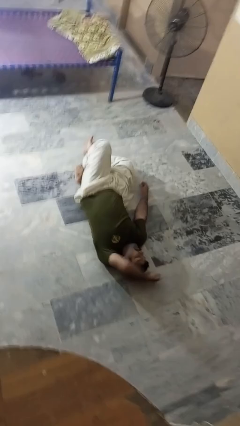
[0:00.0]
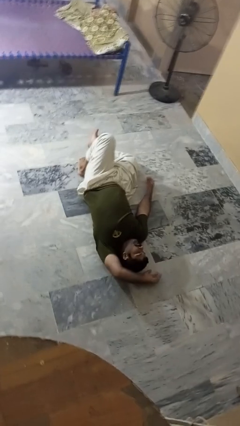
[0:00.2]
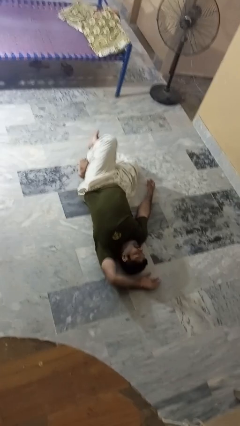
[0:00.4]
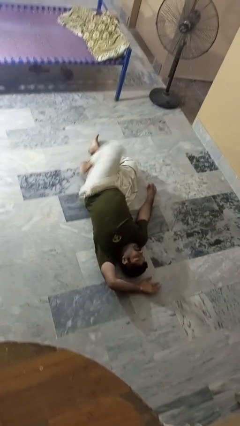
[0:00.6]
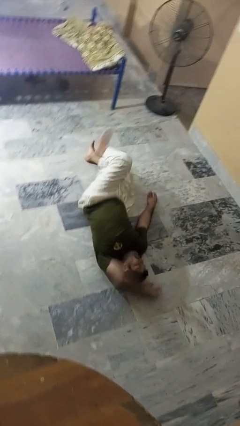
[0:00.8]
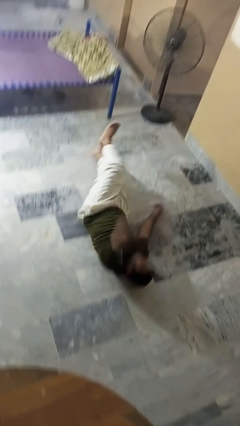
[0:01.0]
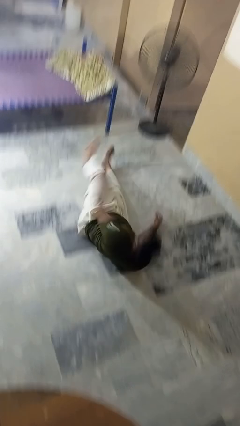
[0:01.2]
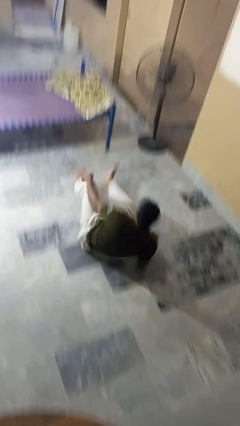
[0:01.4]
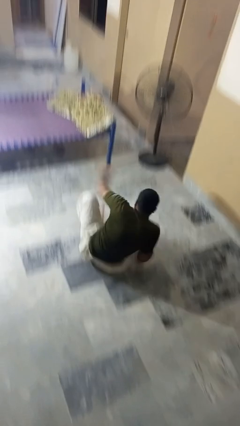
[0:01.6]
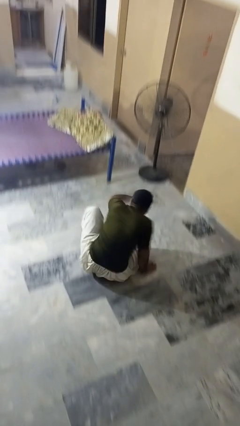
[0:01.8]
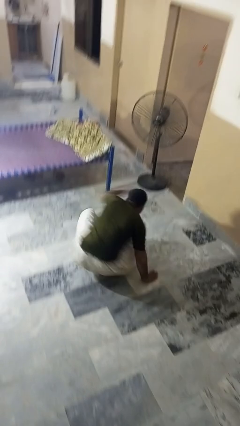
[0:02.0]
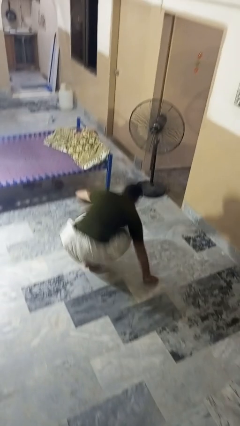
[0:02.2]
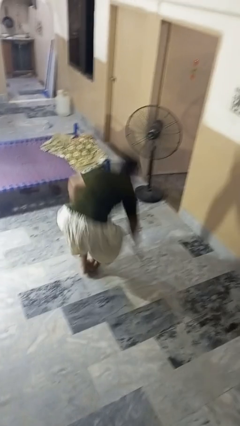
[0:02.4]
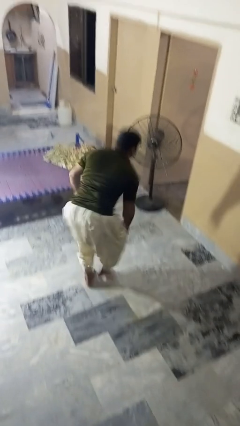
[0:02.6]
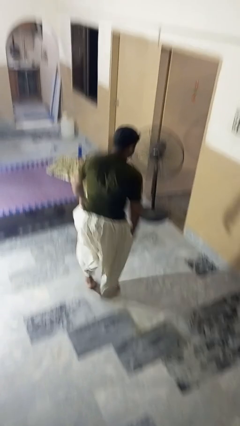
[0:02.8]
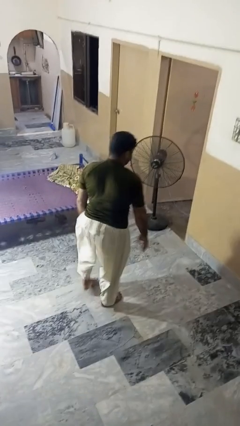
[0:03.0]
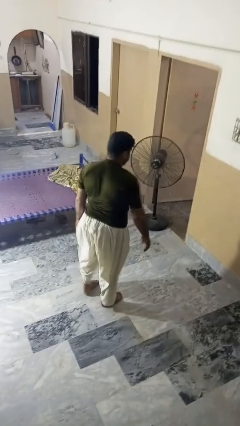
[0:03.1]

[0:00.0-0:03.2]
person stands up from floor

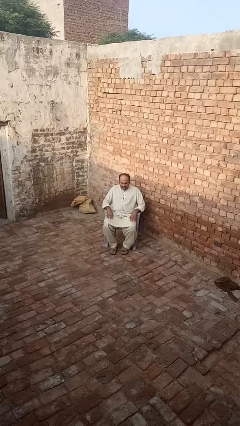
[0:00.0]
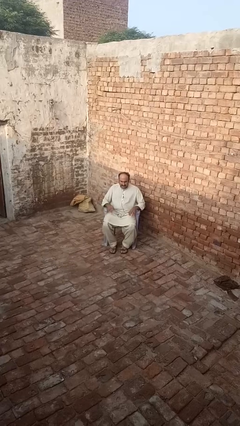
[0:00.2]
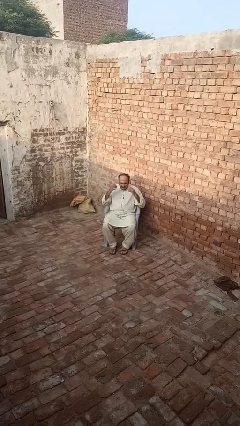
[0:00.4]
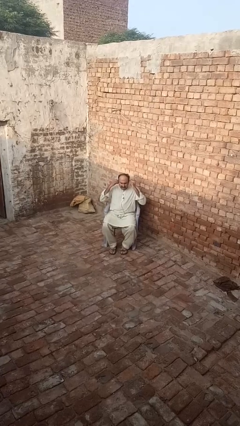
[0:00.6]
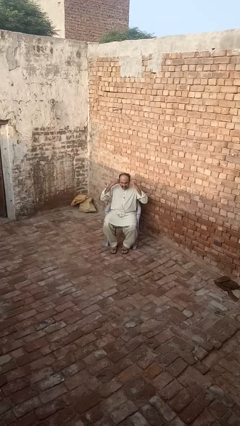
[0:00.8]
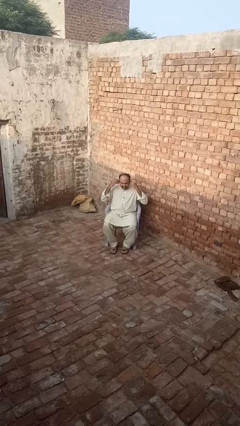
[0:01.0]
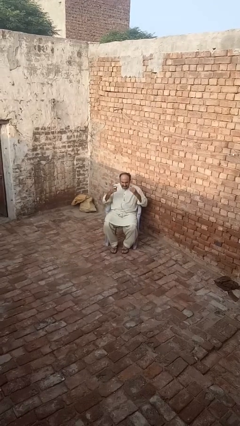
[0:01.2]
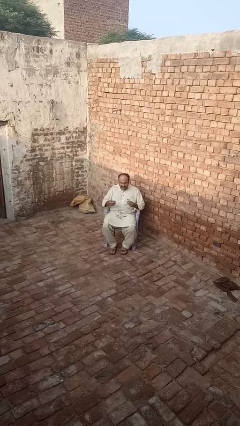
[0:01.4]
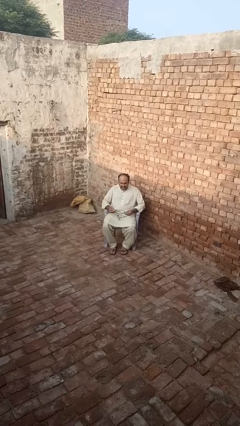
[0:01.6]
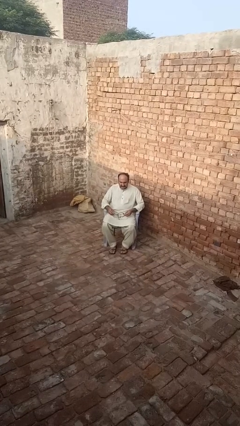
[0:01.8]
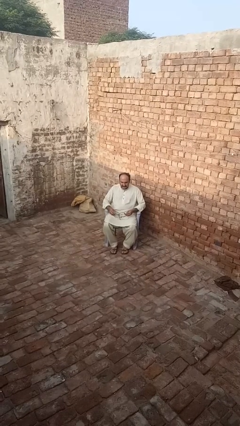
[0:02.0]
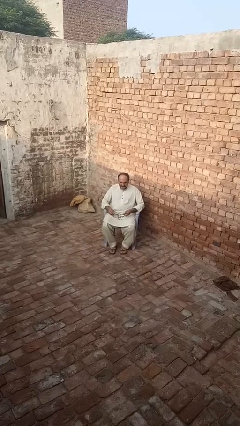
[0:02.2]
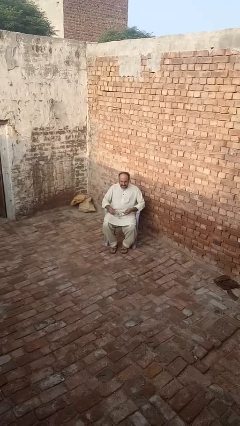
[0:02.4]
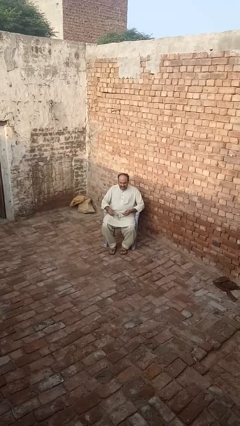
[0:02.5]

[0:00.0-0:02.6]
person takes off headphones

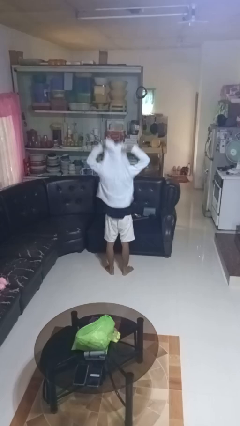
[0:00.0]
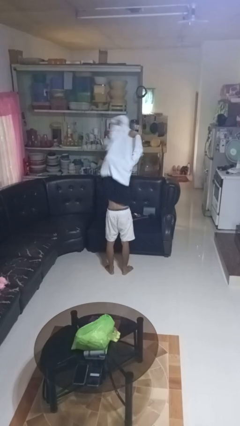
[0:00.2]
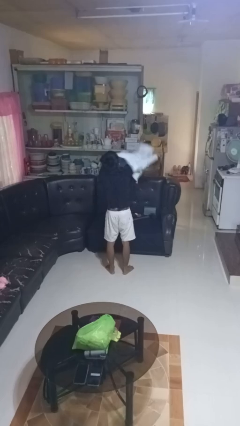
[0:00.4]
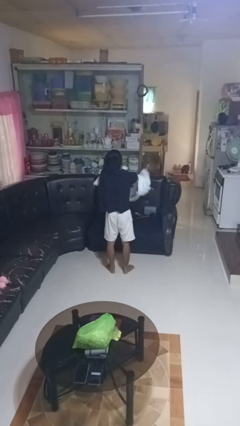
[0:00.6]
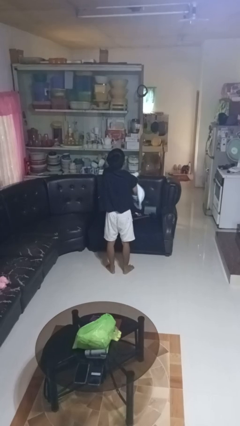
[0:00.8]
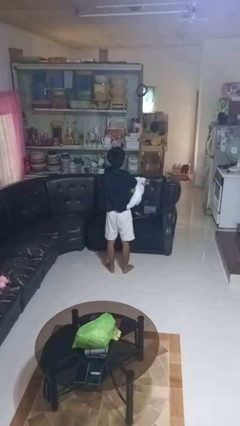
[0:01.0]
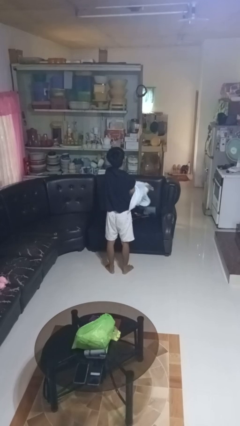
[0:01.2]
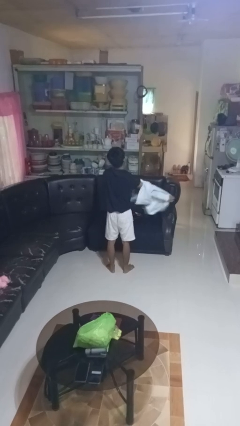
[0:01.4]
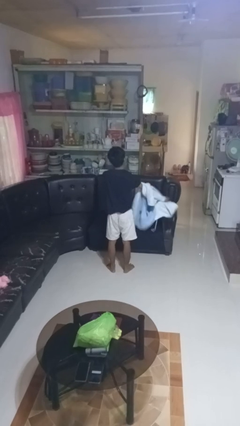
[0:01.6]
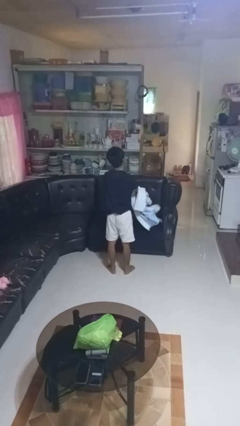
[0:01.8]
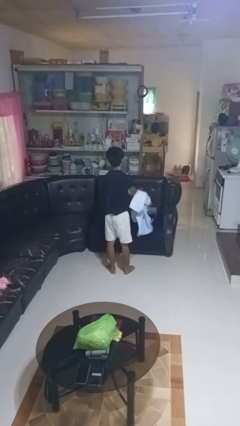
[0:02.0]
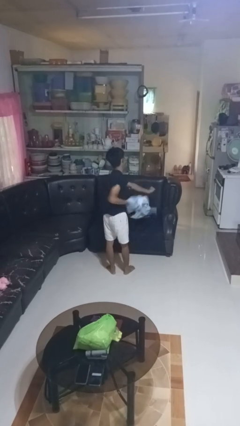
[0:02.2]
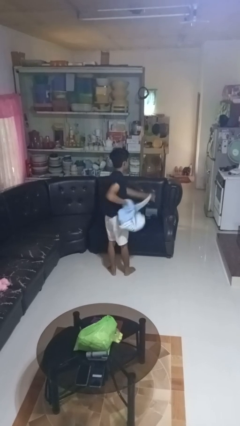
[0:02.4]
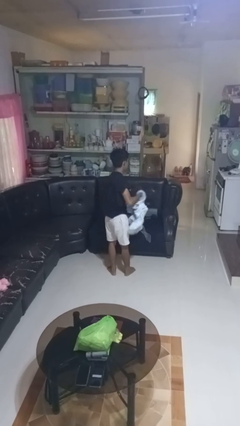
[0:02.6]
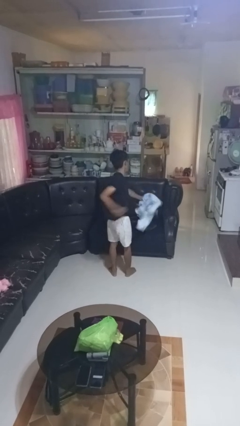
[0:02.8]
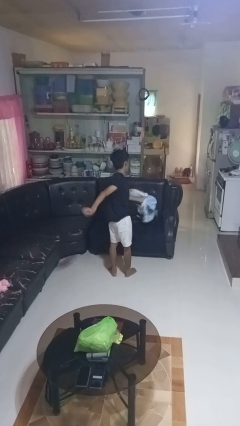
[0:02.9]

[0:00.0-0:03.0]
person takes off hoodie

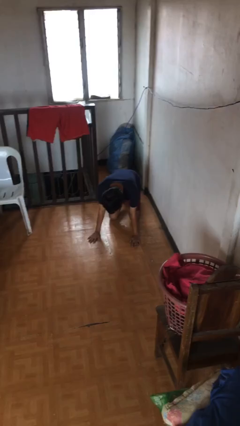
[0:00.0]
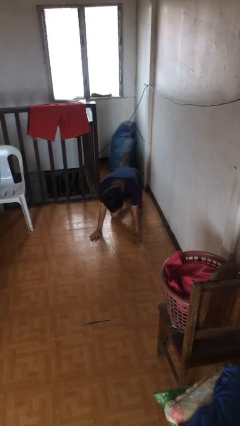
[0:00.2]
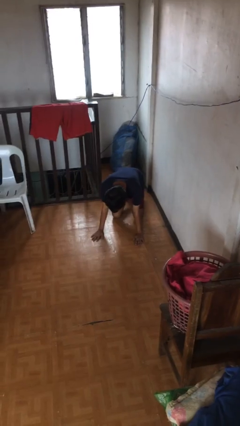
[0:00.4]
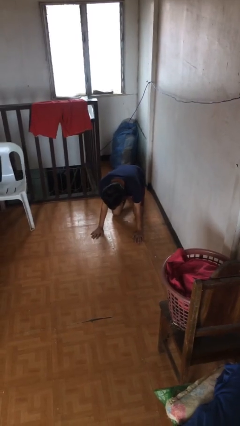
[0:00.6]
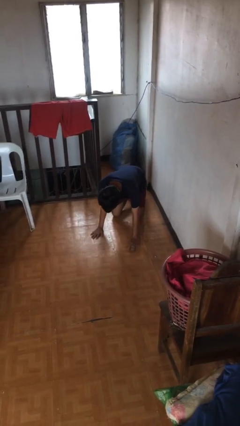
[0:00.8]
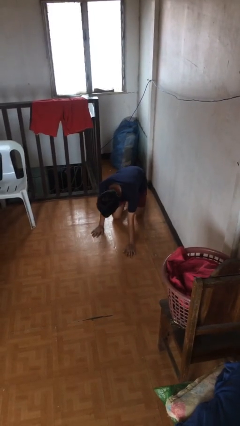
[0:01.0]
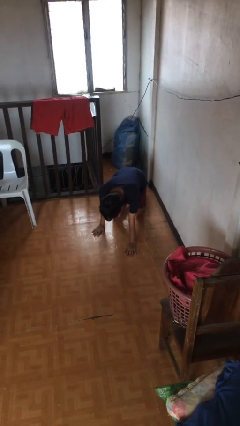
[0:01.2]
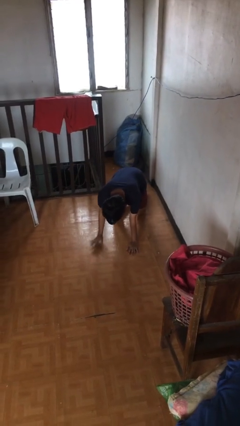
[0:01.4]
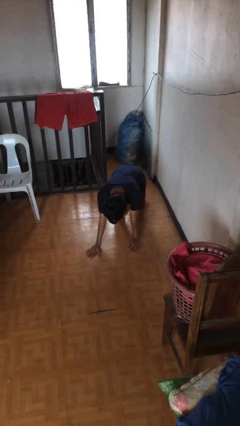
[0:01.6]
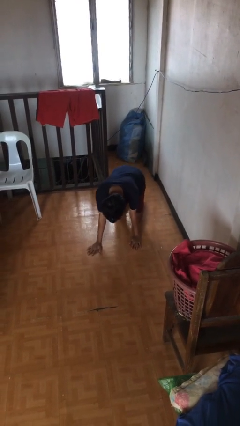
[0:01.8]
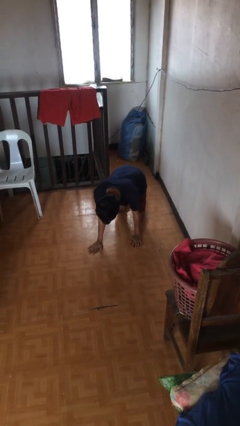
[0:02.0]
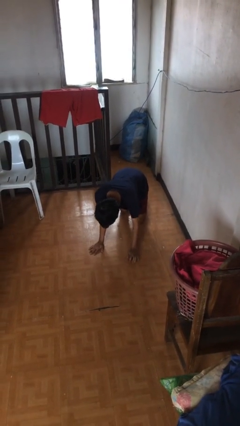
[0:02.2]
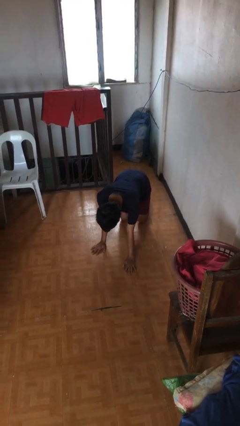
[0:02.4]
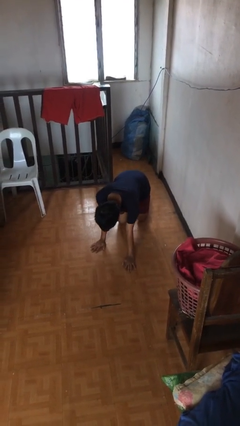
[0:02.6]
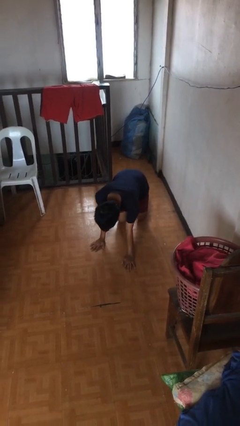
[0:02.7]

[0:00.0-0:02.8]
person crawls

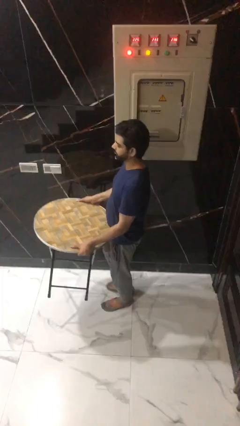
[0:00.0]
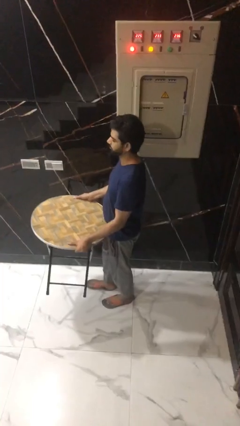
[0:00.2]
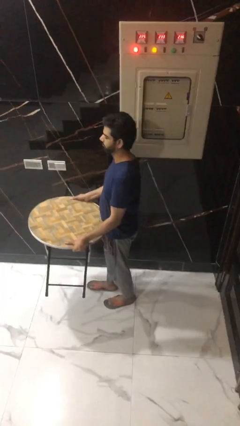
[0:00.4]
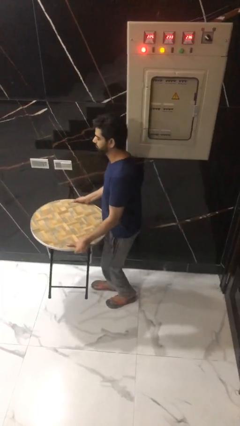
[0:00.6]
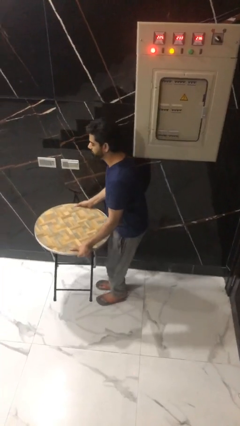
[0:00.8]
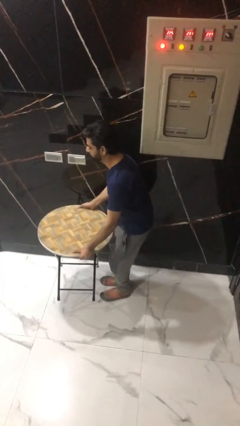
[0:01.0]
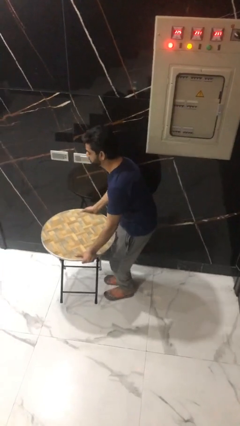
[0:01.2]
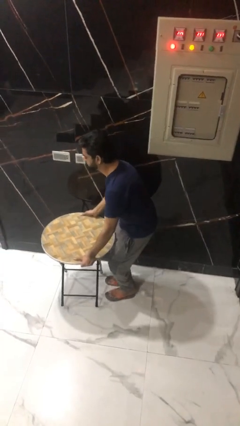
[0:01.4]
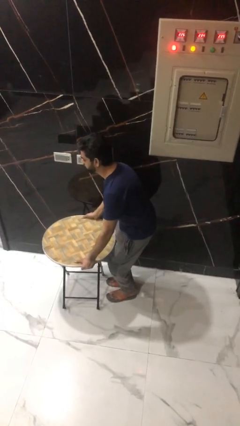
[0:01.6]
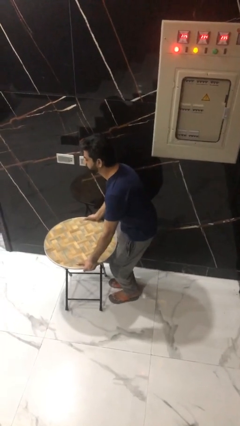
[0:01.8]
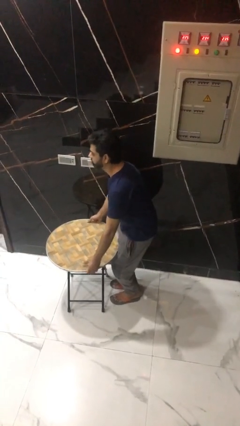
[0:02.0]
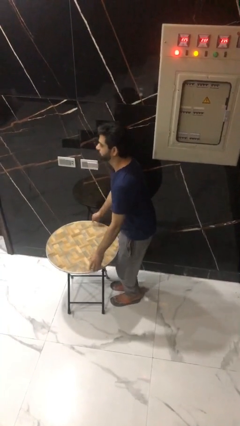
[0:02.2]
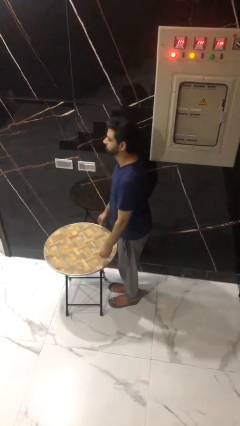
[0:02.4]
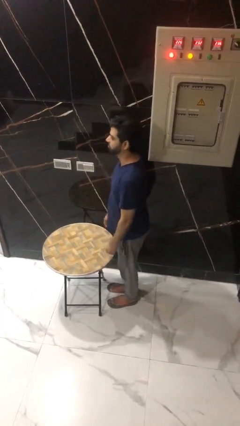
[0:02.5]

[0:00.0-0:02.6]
person puts down object on floor

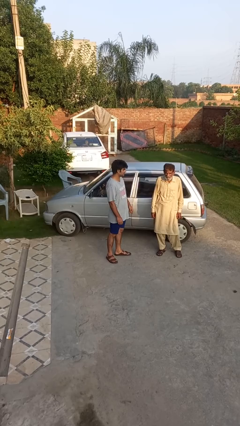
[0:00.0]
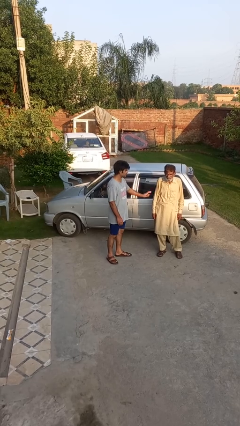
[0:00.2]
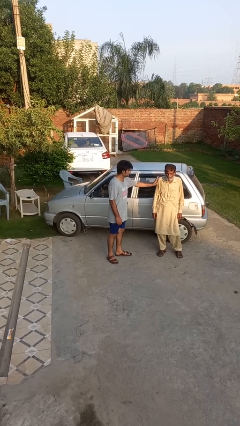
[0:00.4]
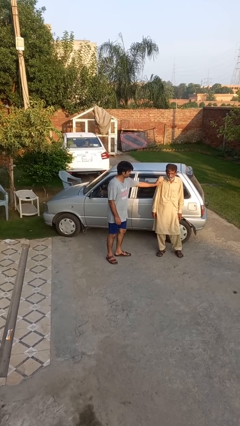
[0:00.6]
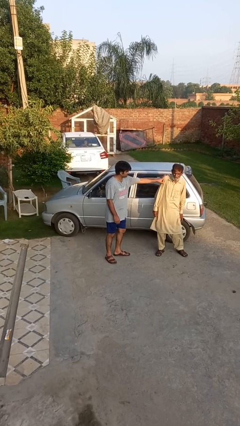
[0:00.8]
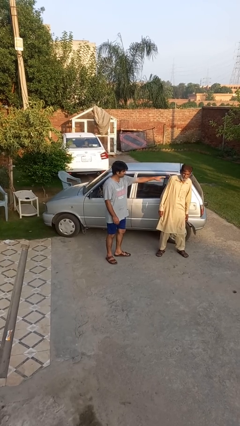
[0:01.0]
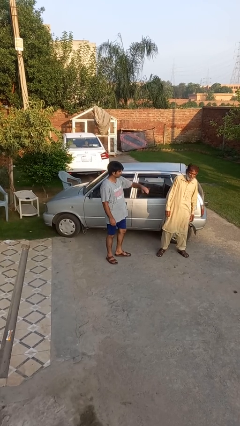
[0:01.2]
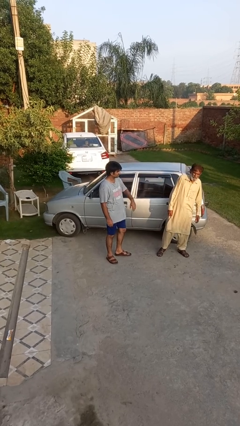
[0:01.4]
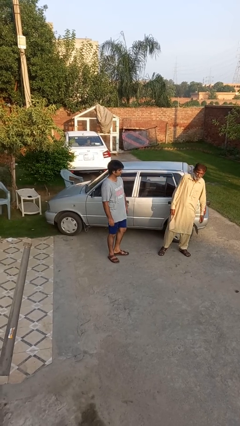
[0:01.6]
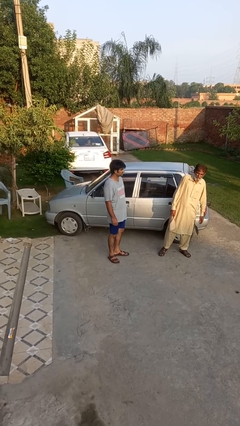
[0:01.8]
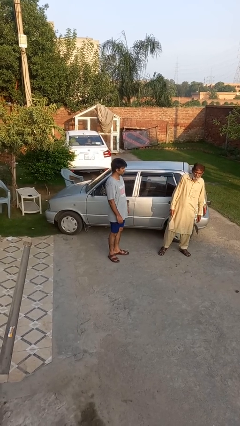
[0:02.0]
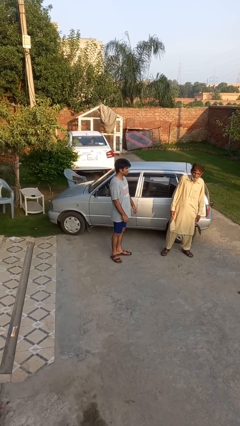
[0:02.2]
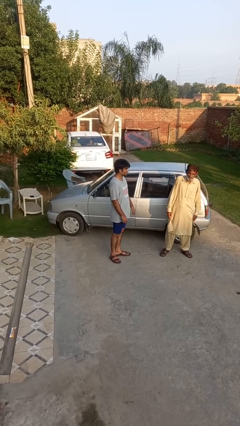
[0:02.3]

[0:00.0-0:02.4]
person shoves person

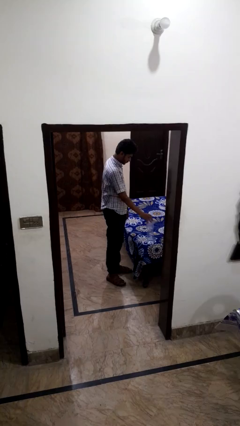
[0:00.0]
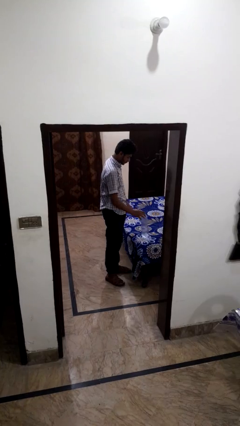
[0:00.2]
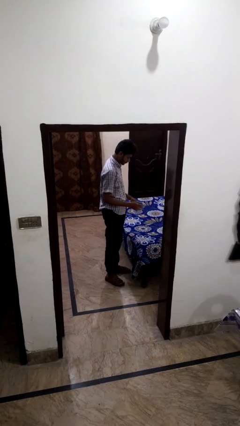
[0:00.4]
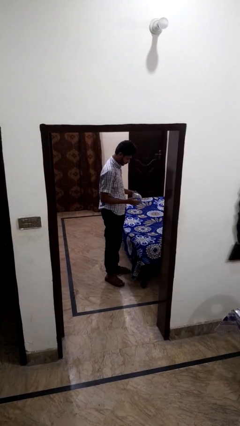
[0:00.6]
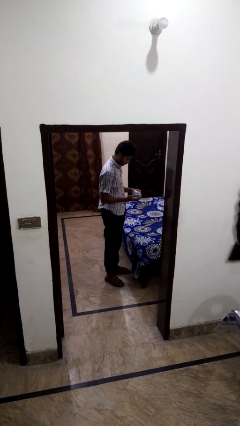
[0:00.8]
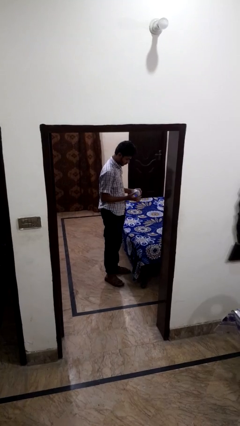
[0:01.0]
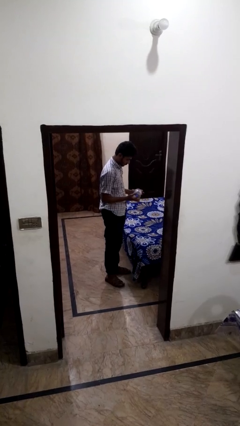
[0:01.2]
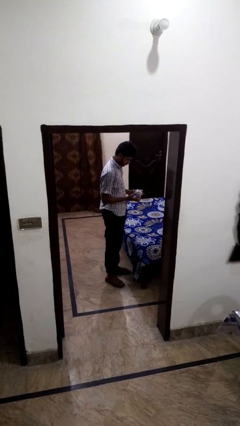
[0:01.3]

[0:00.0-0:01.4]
person picks up object from bed
